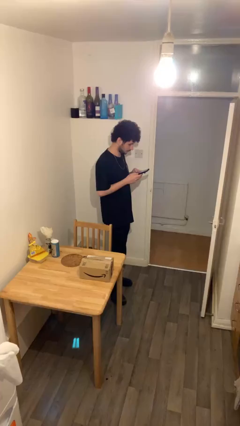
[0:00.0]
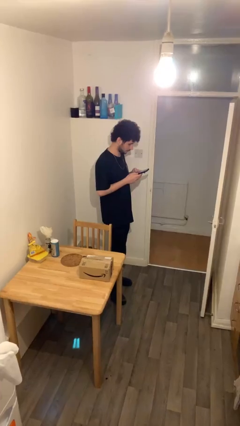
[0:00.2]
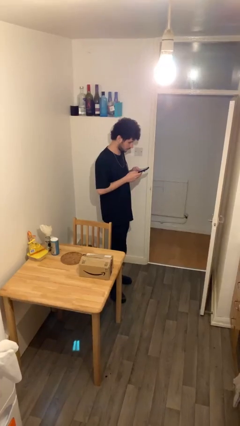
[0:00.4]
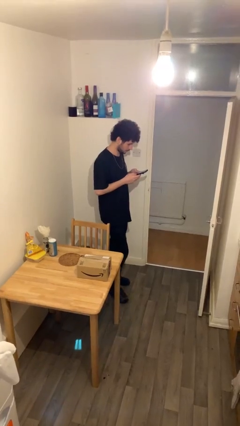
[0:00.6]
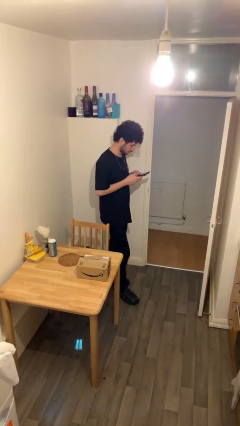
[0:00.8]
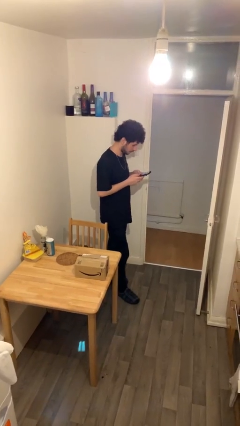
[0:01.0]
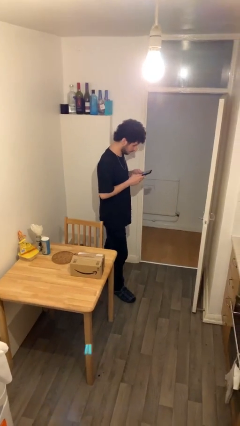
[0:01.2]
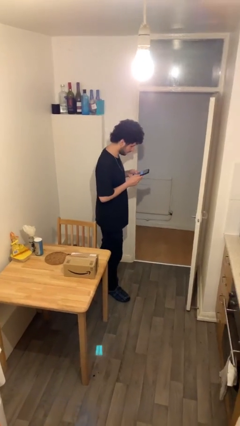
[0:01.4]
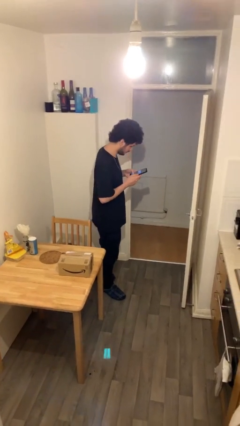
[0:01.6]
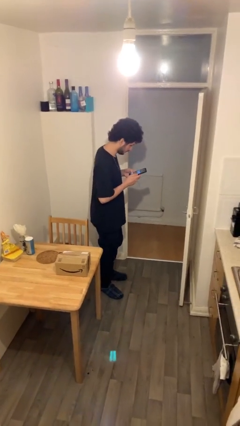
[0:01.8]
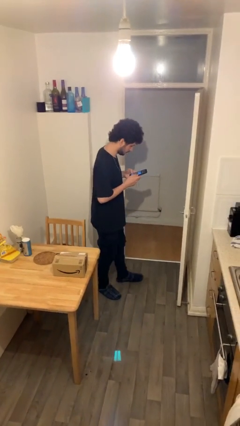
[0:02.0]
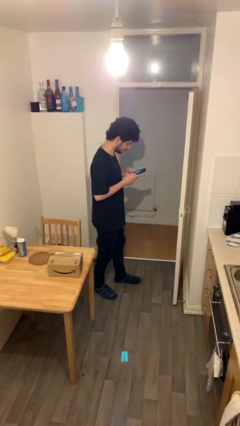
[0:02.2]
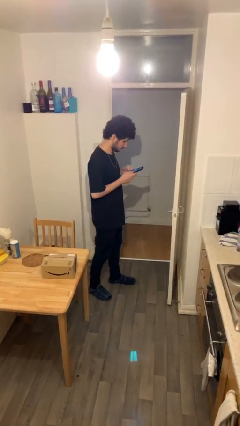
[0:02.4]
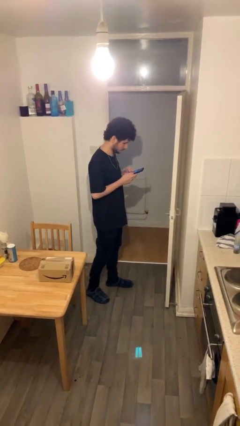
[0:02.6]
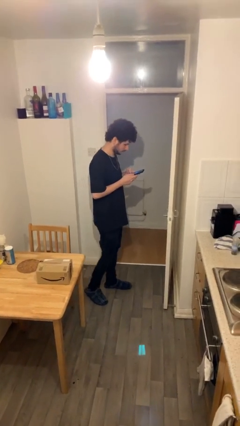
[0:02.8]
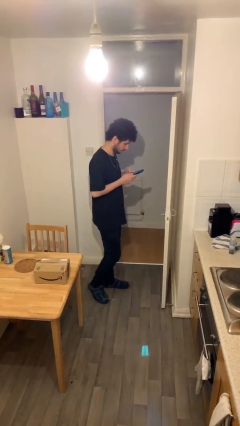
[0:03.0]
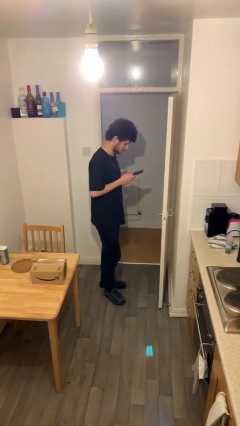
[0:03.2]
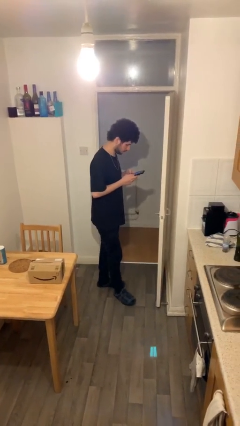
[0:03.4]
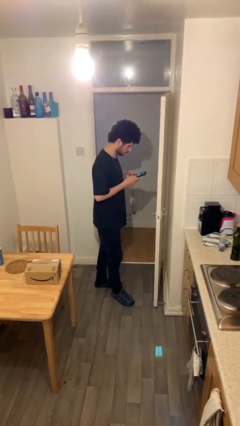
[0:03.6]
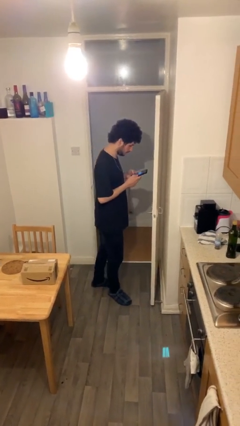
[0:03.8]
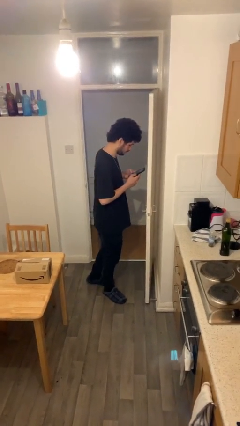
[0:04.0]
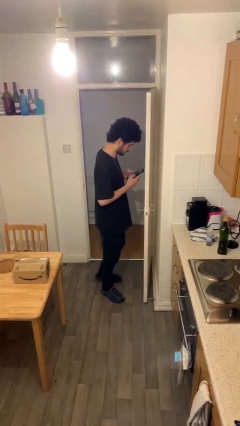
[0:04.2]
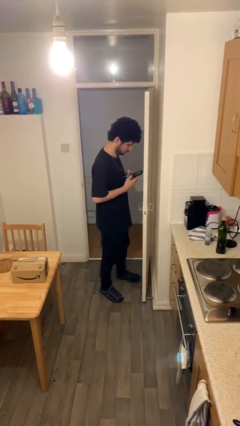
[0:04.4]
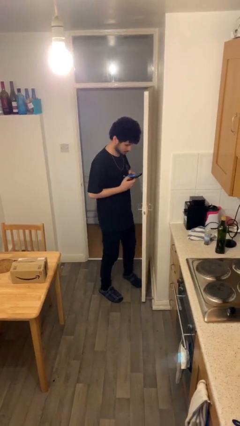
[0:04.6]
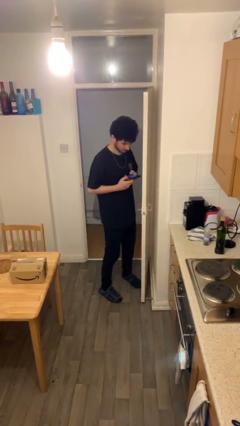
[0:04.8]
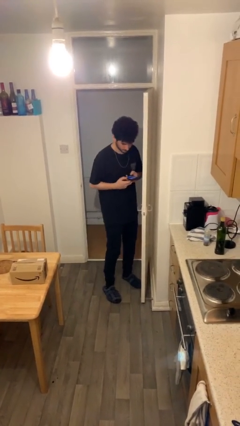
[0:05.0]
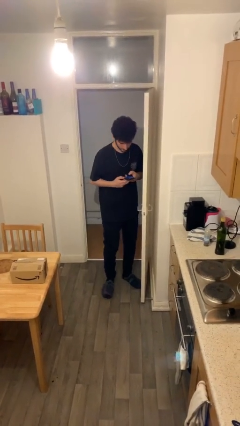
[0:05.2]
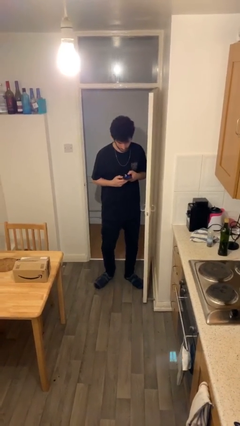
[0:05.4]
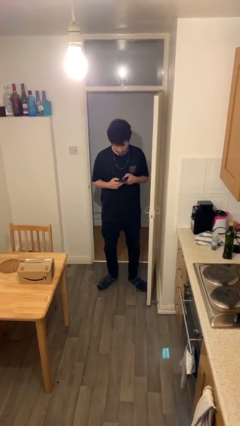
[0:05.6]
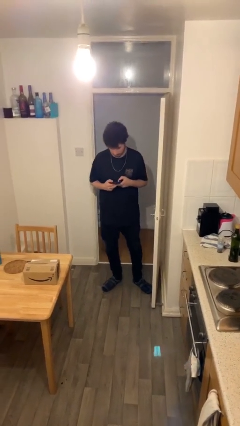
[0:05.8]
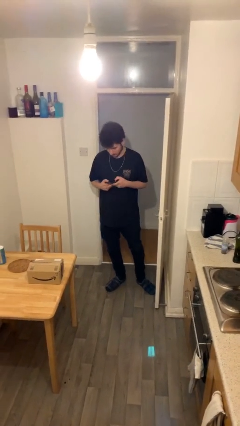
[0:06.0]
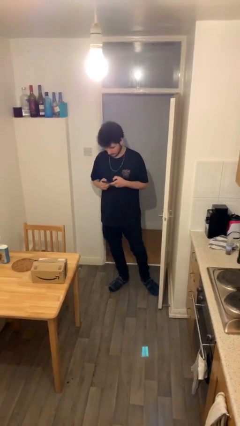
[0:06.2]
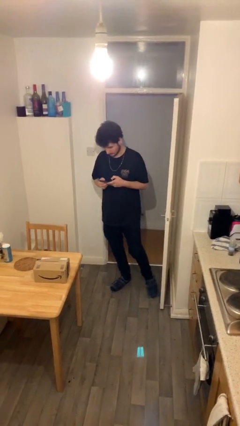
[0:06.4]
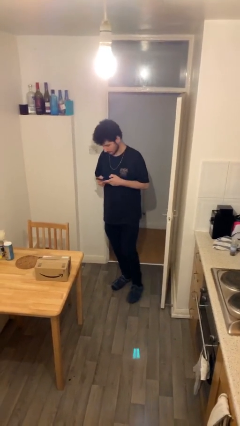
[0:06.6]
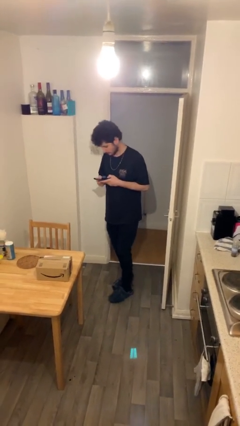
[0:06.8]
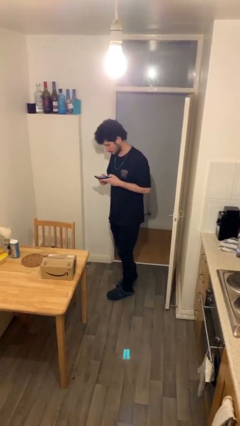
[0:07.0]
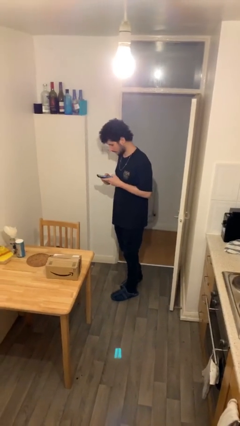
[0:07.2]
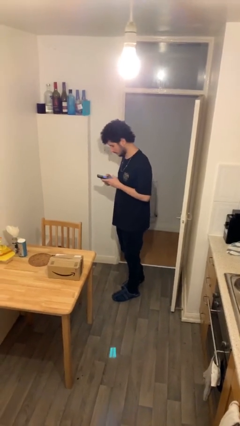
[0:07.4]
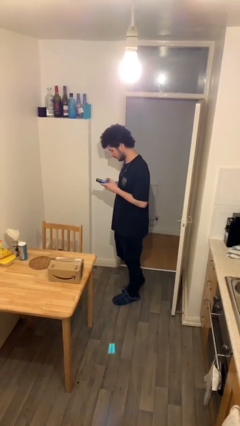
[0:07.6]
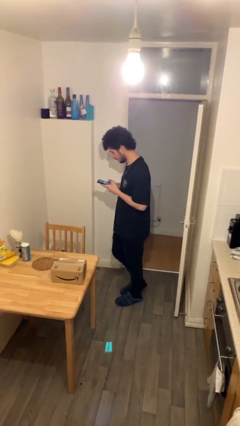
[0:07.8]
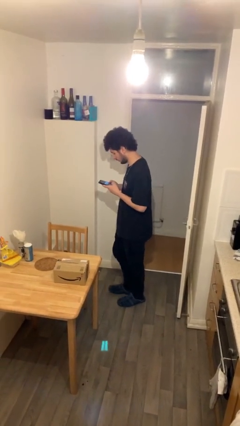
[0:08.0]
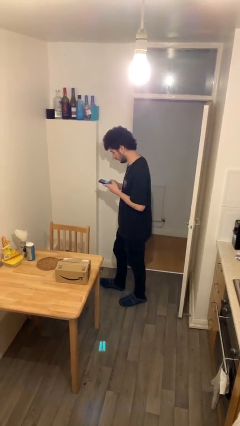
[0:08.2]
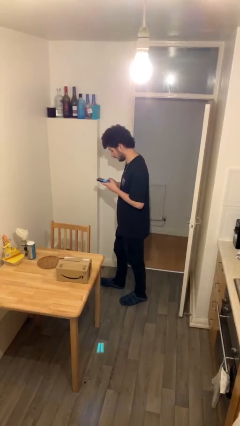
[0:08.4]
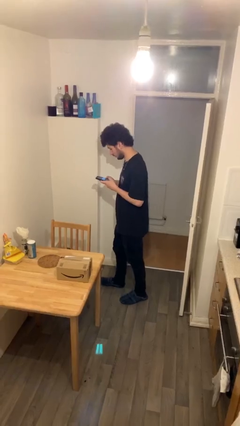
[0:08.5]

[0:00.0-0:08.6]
person texts on phone

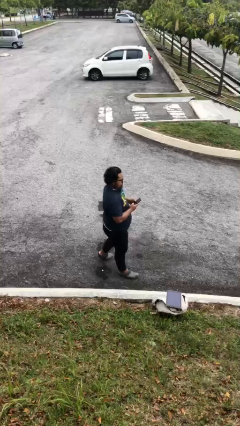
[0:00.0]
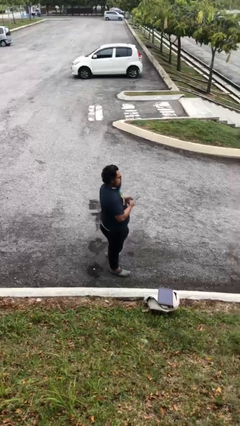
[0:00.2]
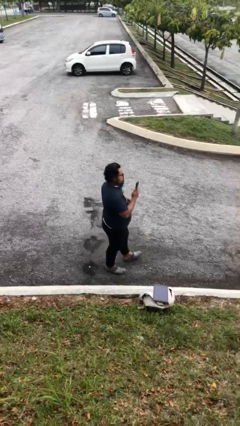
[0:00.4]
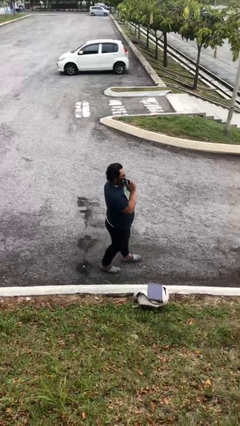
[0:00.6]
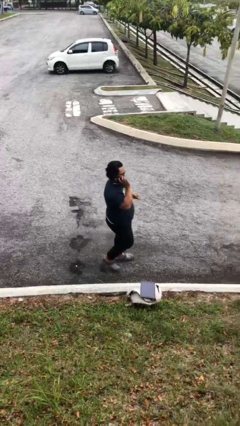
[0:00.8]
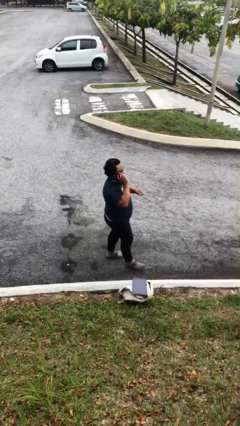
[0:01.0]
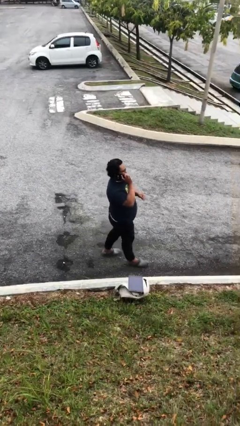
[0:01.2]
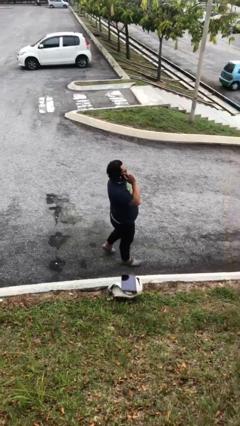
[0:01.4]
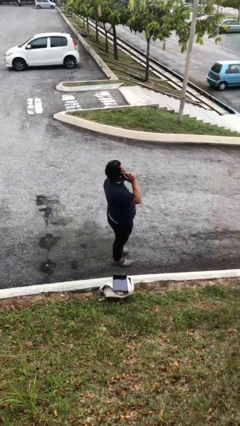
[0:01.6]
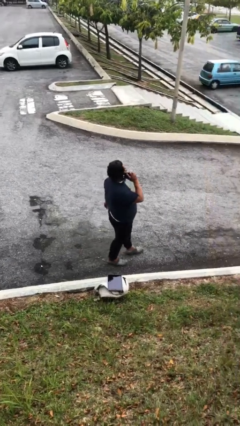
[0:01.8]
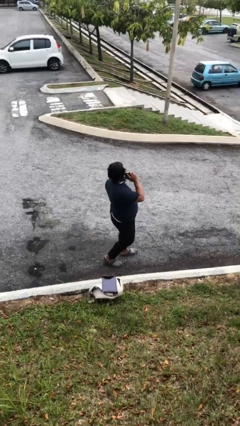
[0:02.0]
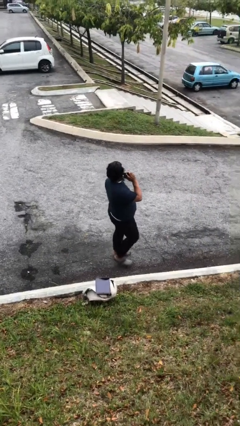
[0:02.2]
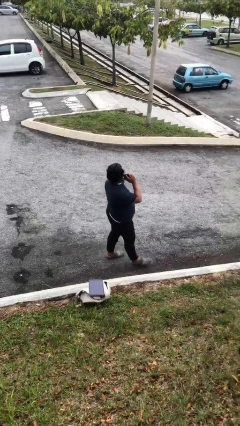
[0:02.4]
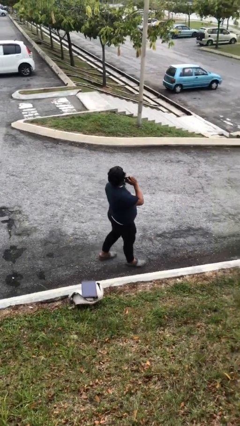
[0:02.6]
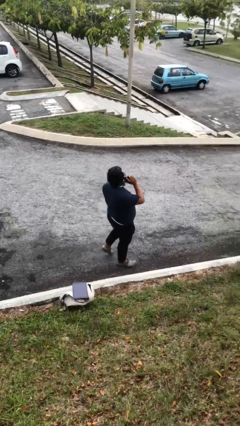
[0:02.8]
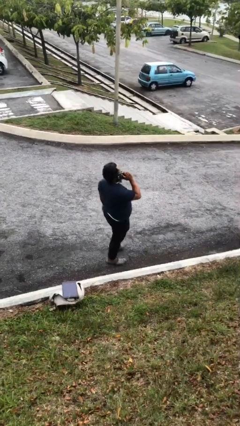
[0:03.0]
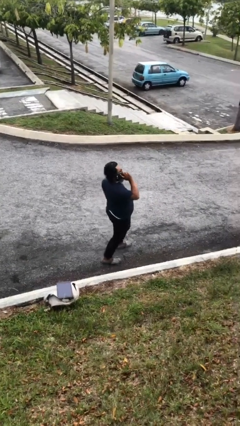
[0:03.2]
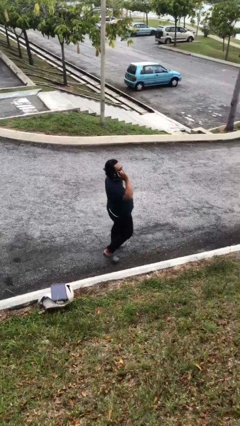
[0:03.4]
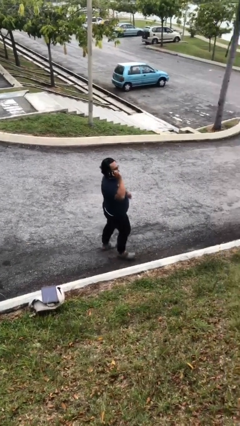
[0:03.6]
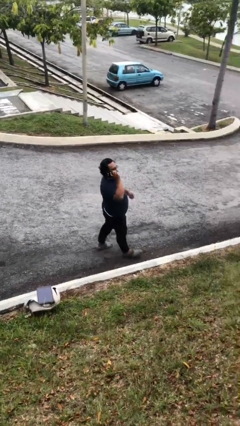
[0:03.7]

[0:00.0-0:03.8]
person talks on phone

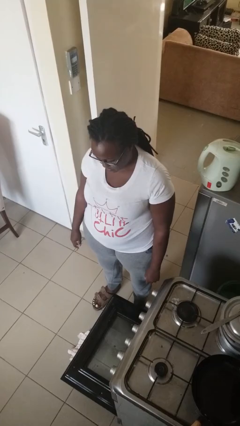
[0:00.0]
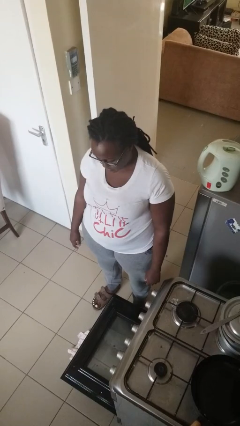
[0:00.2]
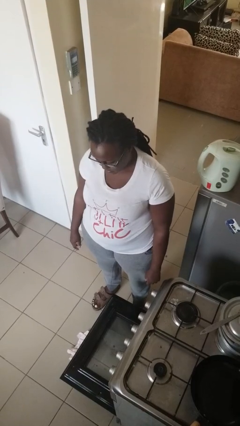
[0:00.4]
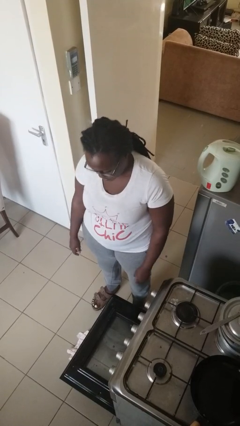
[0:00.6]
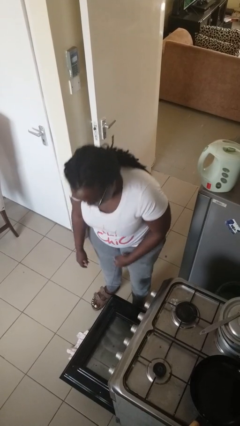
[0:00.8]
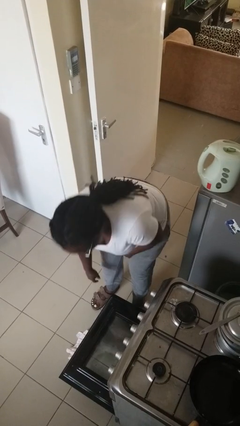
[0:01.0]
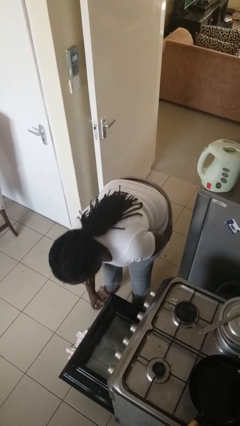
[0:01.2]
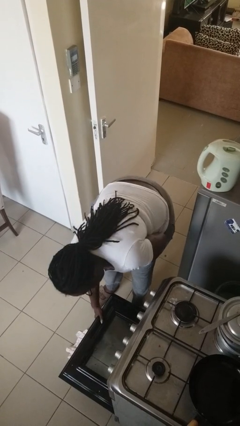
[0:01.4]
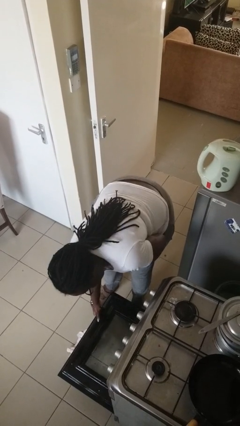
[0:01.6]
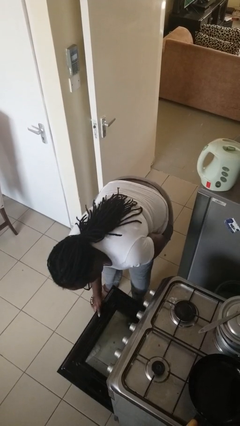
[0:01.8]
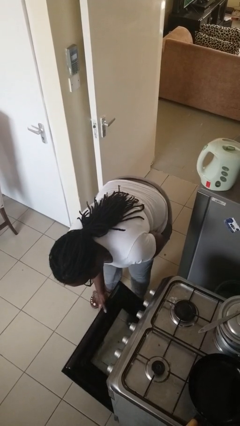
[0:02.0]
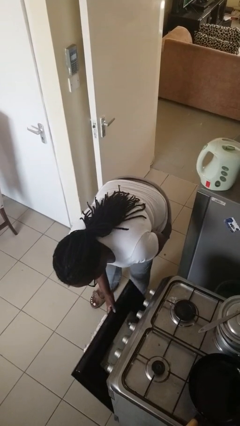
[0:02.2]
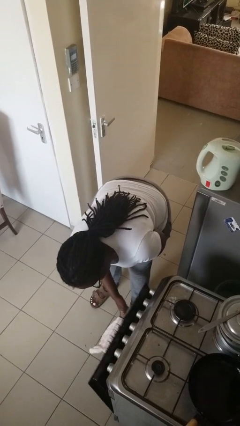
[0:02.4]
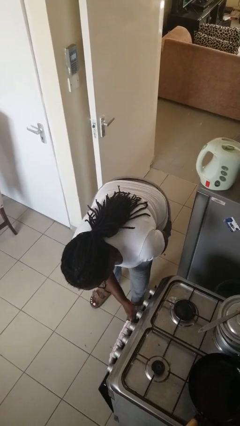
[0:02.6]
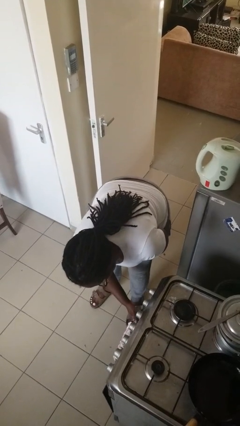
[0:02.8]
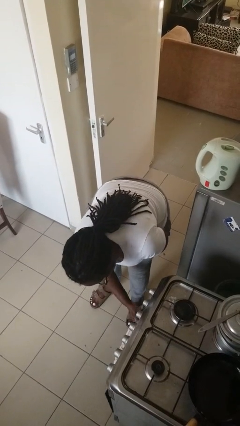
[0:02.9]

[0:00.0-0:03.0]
person closes oven door

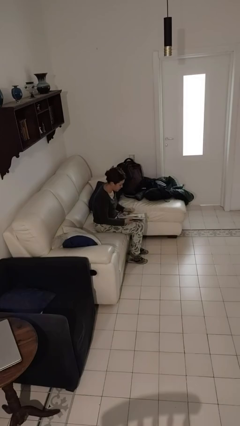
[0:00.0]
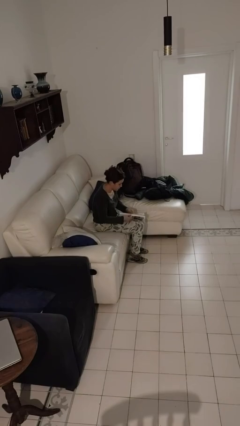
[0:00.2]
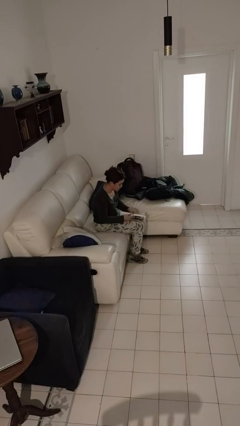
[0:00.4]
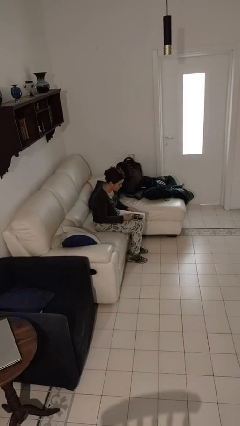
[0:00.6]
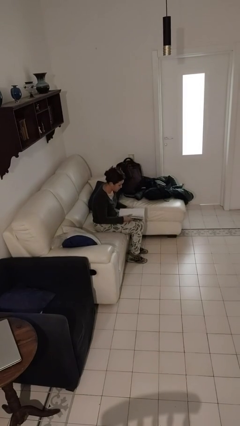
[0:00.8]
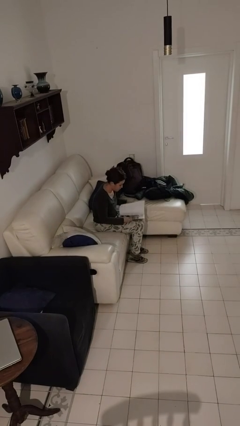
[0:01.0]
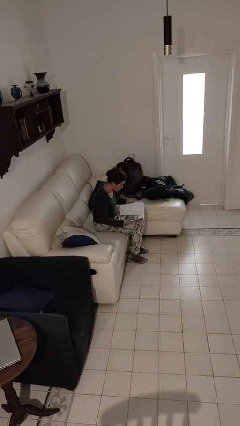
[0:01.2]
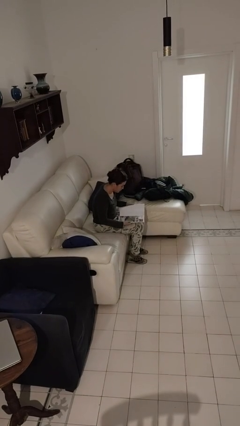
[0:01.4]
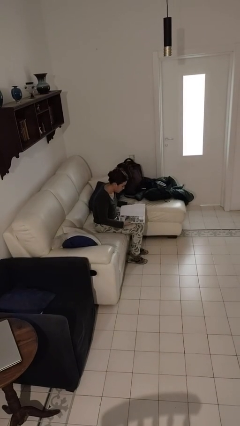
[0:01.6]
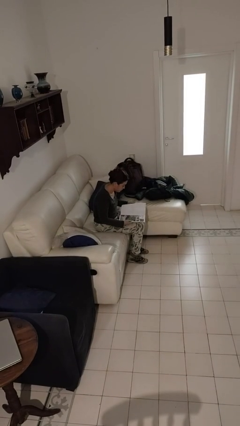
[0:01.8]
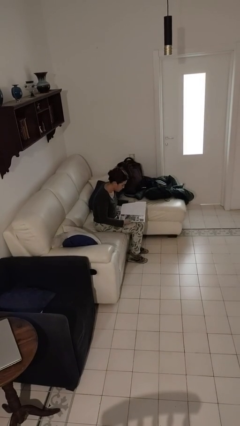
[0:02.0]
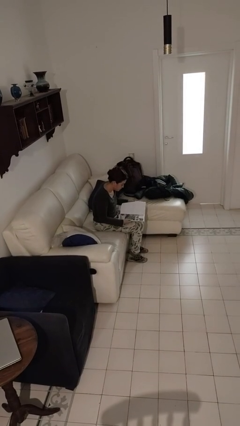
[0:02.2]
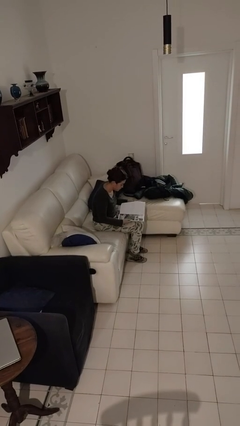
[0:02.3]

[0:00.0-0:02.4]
person reads magazine

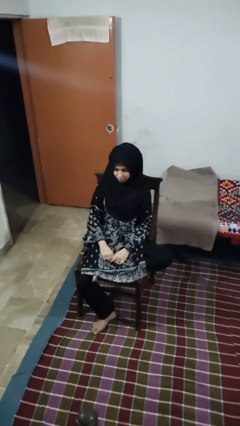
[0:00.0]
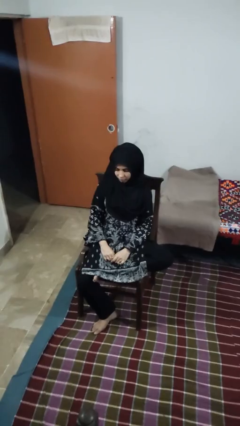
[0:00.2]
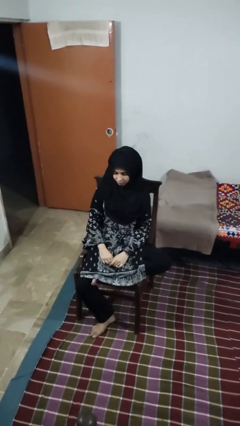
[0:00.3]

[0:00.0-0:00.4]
person swats bug
